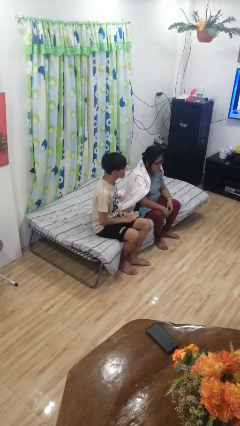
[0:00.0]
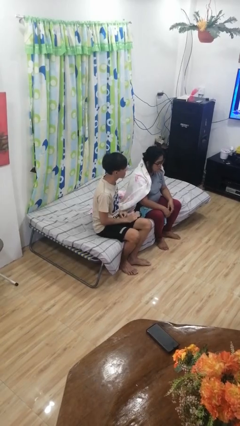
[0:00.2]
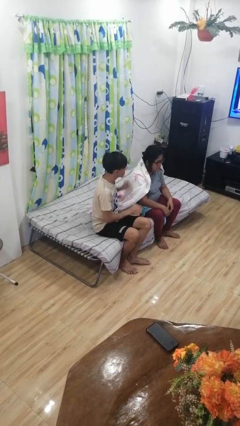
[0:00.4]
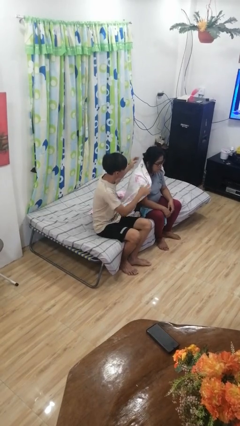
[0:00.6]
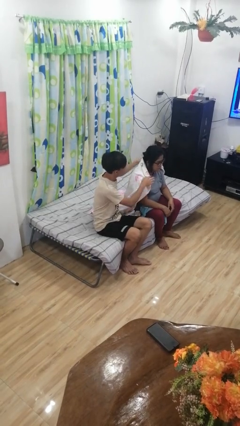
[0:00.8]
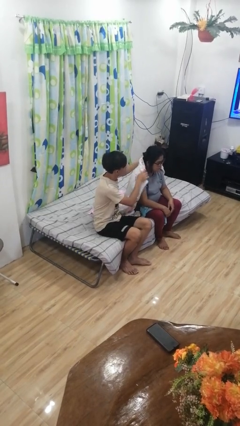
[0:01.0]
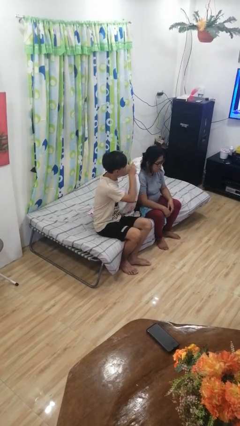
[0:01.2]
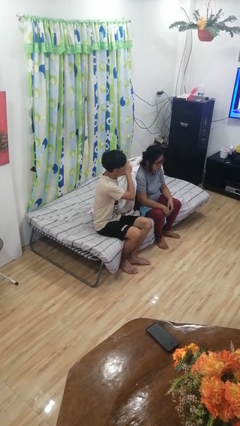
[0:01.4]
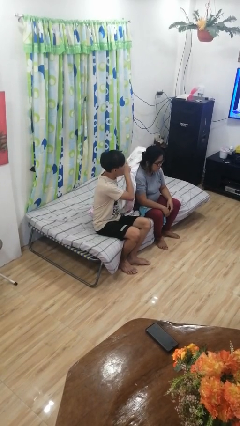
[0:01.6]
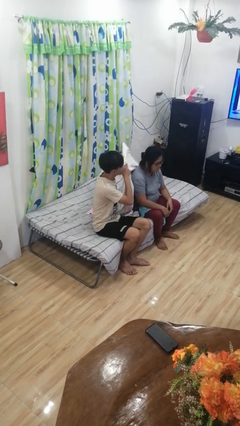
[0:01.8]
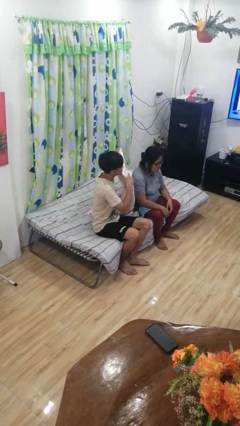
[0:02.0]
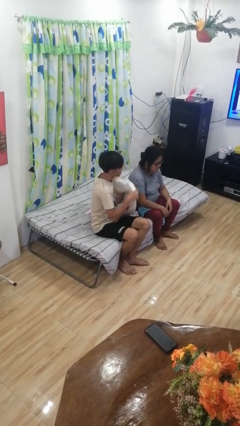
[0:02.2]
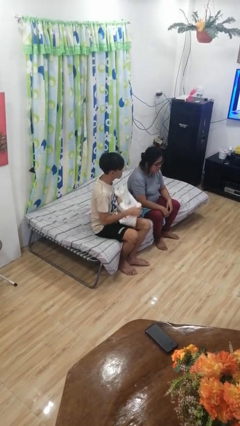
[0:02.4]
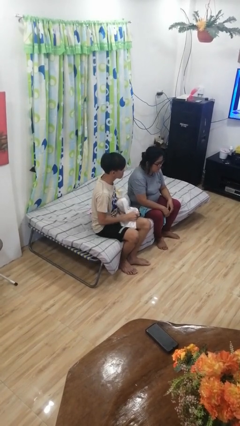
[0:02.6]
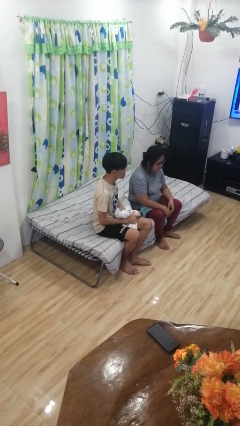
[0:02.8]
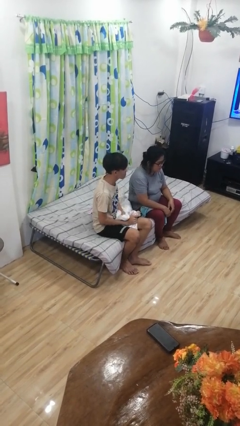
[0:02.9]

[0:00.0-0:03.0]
person uncovers friend with blanket

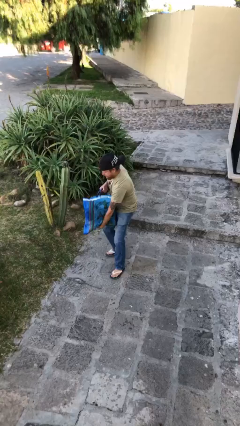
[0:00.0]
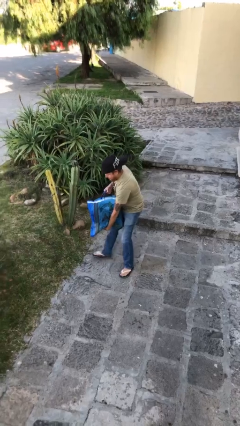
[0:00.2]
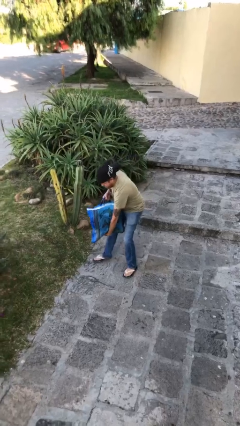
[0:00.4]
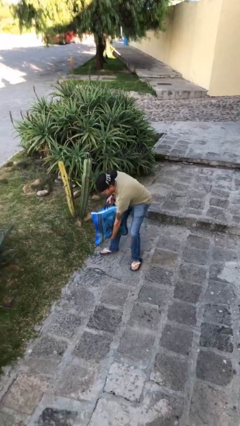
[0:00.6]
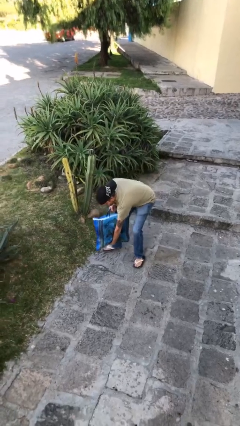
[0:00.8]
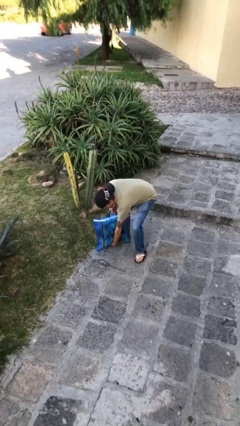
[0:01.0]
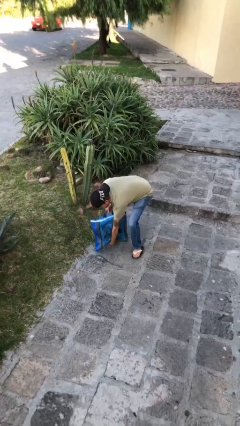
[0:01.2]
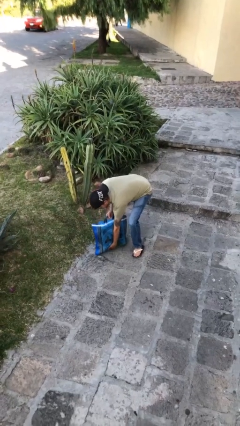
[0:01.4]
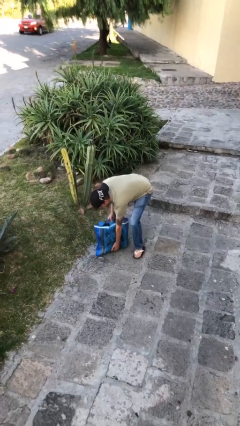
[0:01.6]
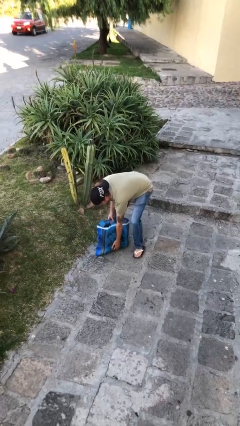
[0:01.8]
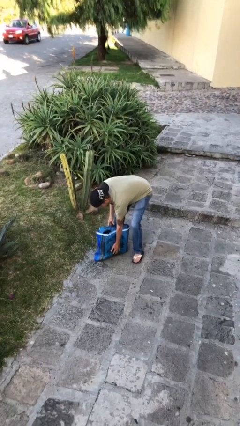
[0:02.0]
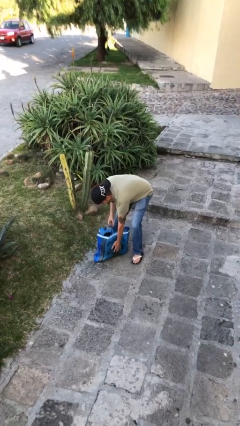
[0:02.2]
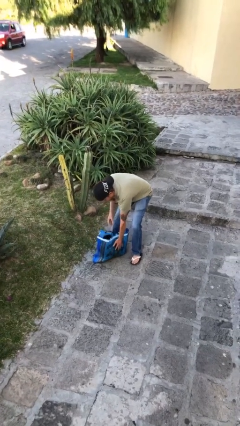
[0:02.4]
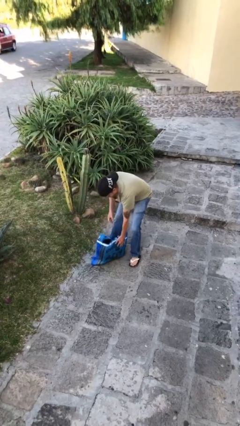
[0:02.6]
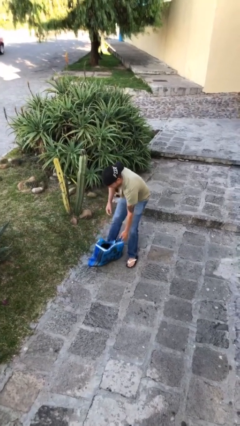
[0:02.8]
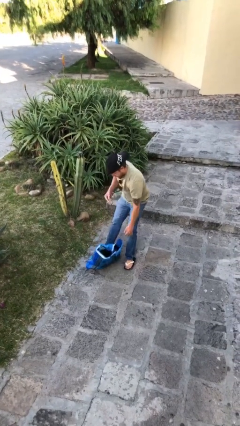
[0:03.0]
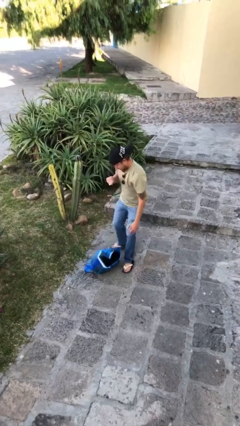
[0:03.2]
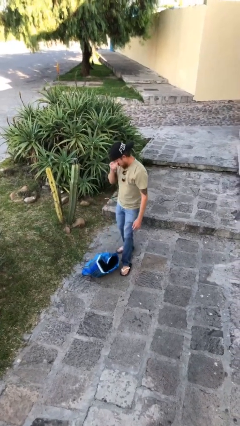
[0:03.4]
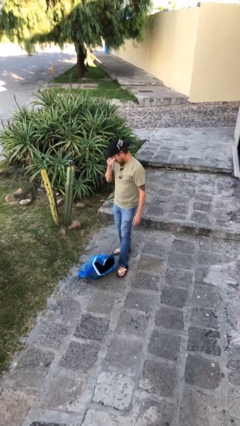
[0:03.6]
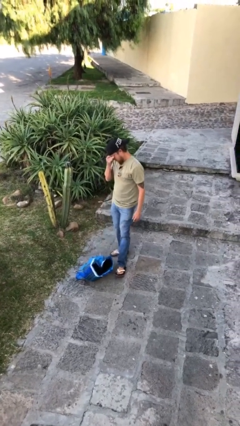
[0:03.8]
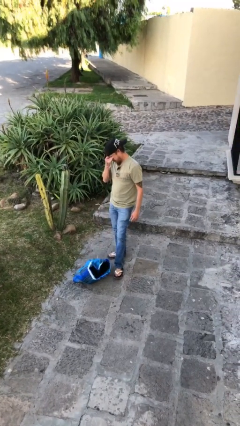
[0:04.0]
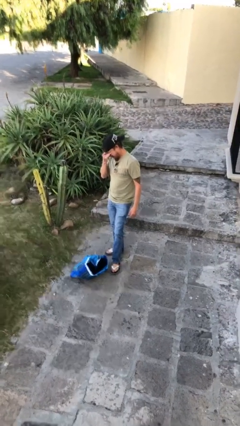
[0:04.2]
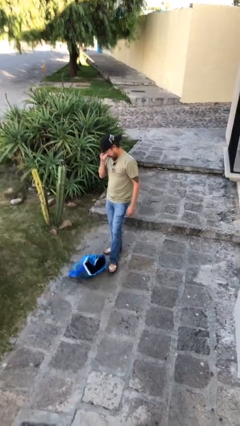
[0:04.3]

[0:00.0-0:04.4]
person puts down object on floor

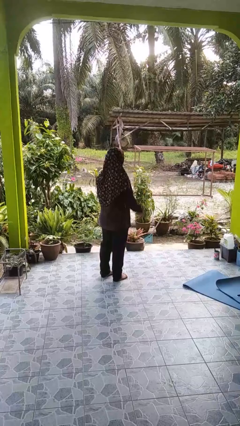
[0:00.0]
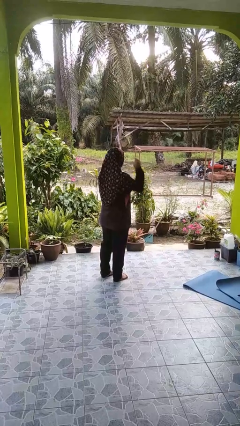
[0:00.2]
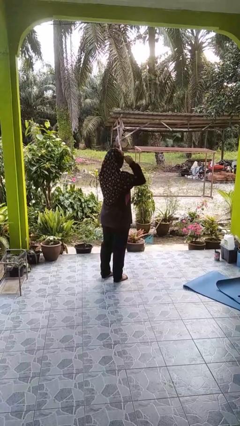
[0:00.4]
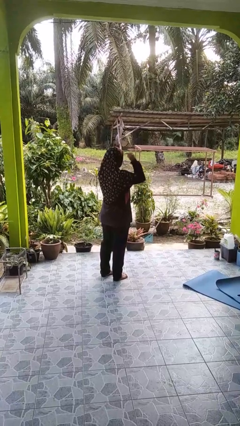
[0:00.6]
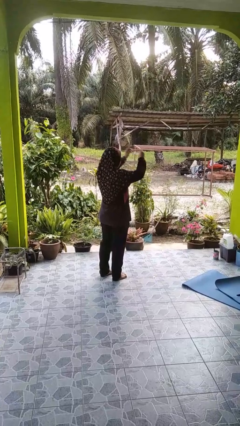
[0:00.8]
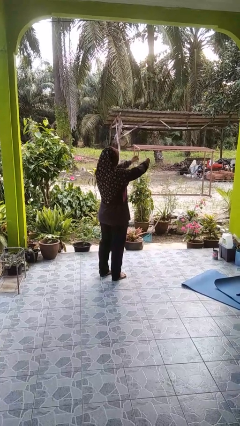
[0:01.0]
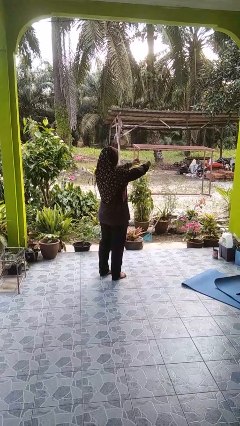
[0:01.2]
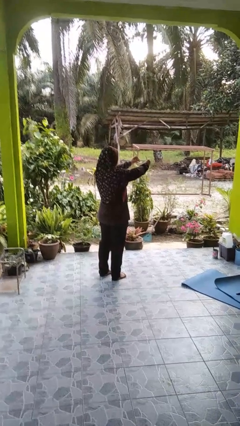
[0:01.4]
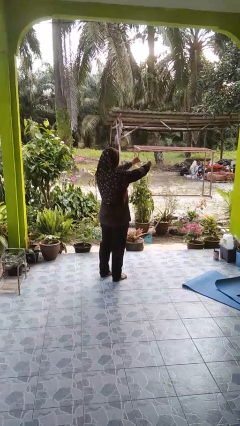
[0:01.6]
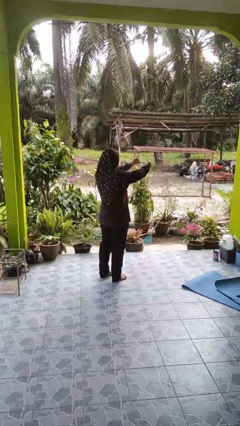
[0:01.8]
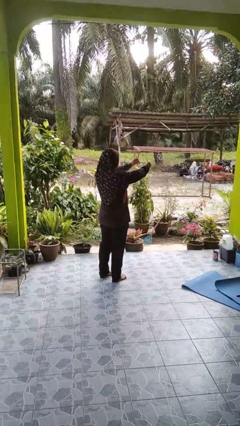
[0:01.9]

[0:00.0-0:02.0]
person takes off glasses

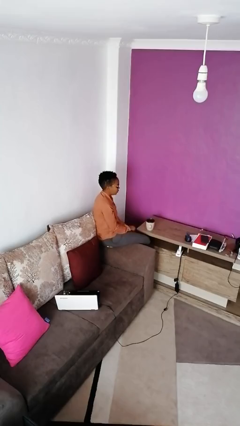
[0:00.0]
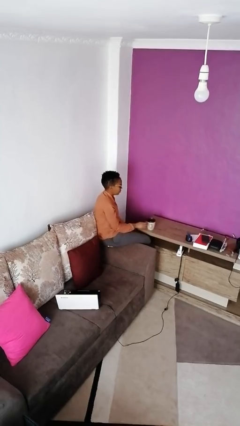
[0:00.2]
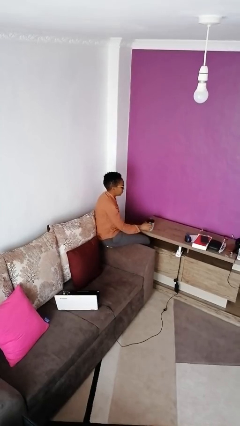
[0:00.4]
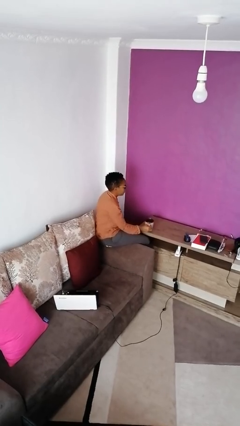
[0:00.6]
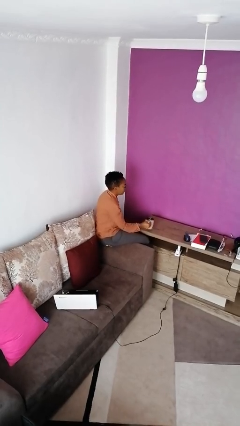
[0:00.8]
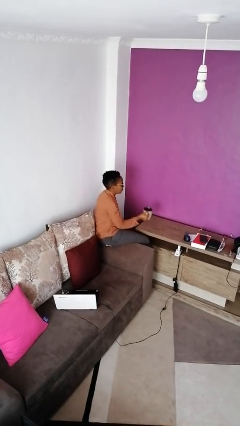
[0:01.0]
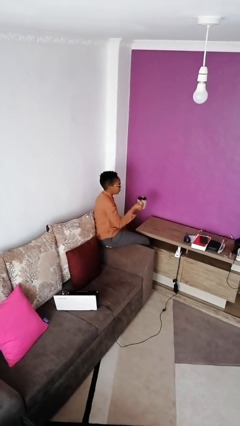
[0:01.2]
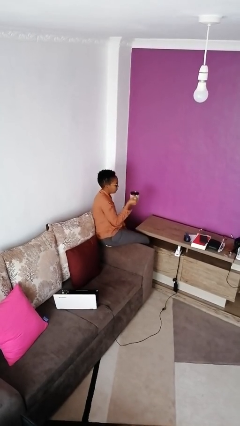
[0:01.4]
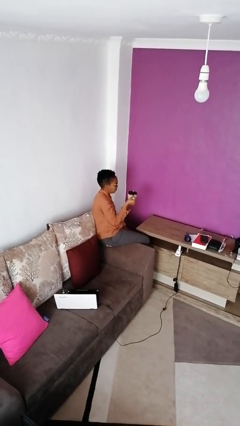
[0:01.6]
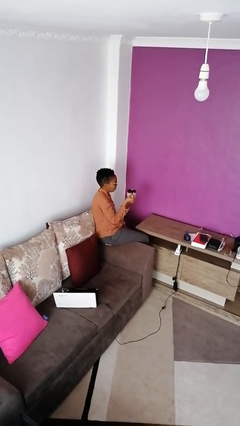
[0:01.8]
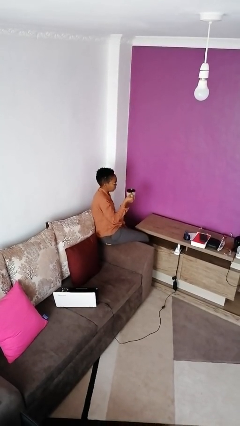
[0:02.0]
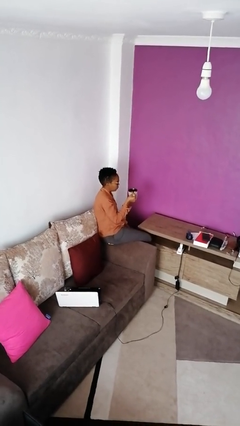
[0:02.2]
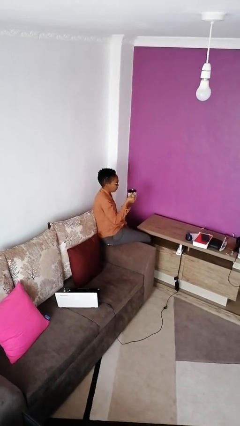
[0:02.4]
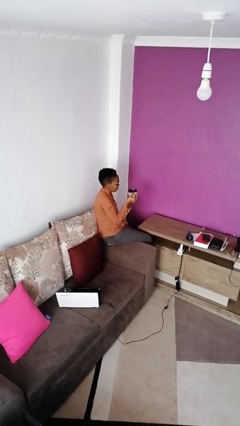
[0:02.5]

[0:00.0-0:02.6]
person picks up object from table

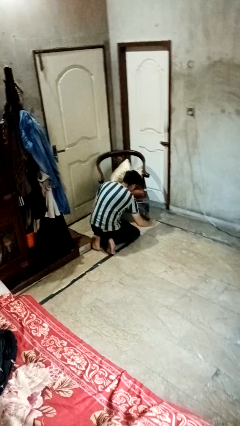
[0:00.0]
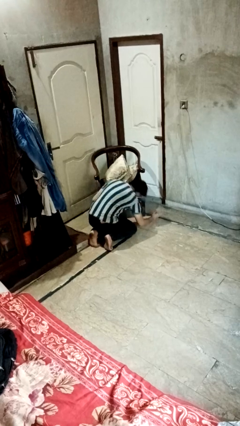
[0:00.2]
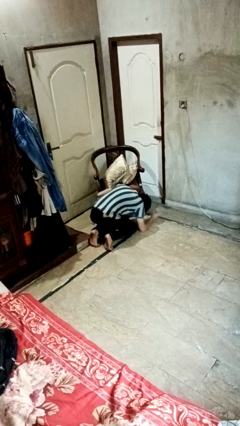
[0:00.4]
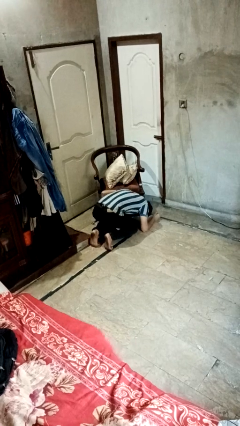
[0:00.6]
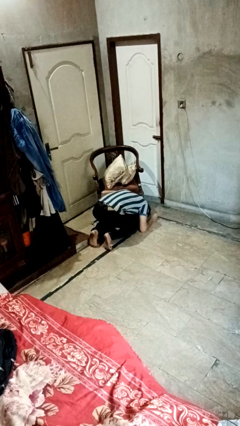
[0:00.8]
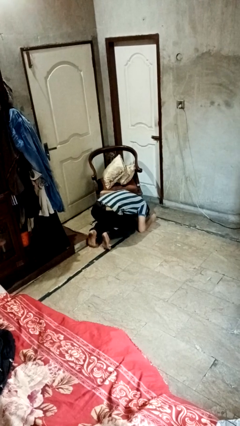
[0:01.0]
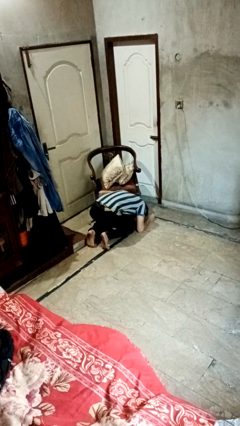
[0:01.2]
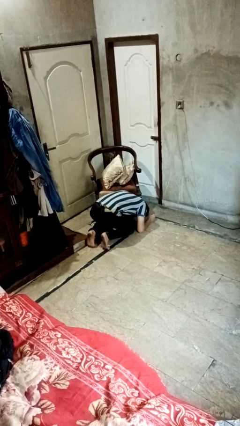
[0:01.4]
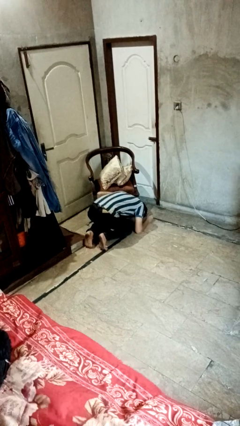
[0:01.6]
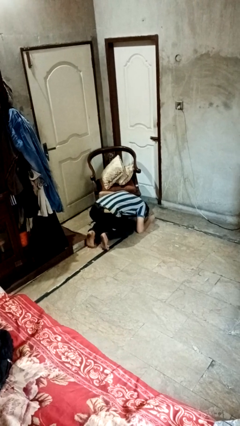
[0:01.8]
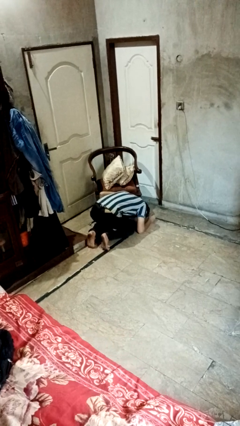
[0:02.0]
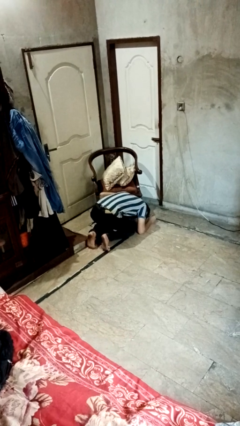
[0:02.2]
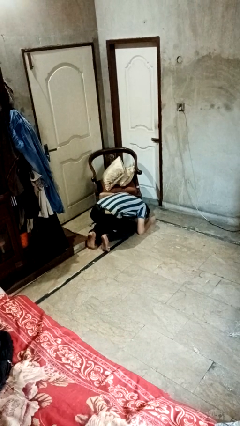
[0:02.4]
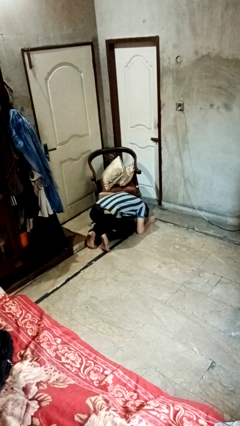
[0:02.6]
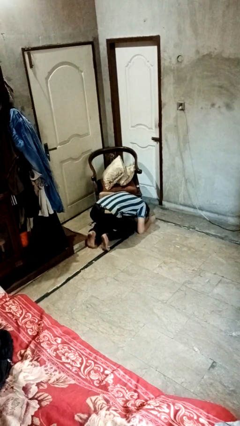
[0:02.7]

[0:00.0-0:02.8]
person searches under couch

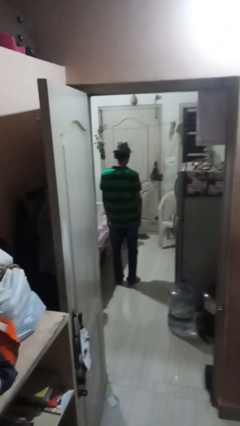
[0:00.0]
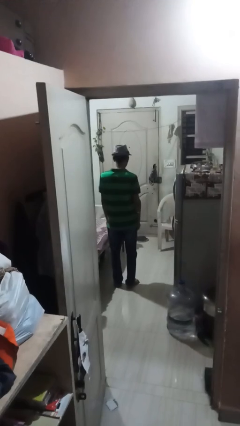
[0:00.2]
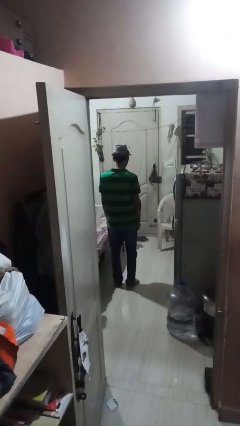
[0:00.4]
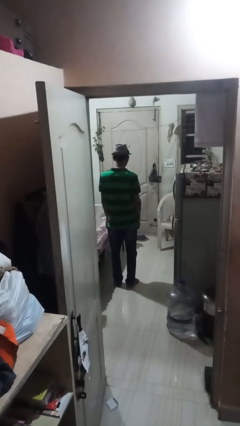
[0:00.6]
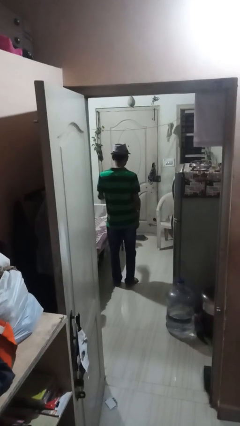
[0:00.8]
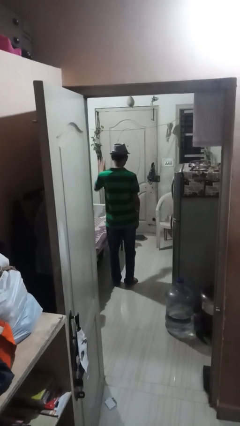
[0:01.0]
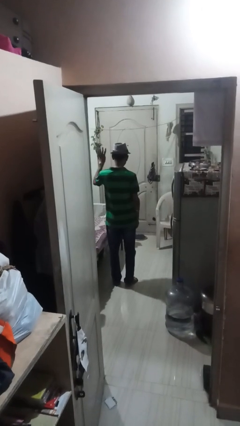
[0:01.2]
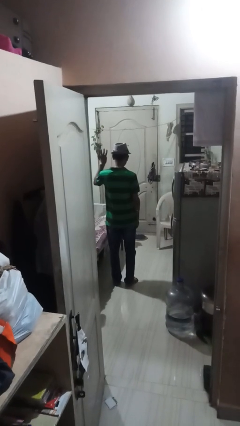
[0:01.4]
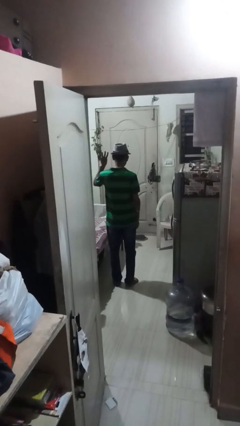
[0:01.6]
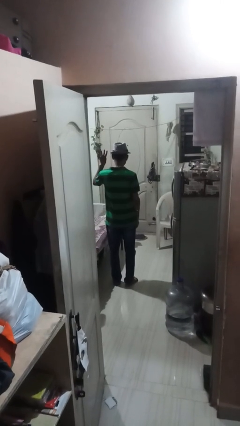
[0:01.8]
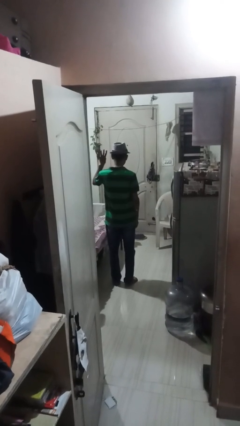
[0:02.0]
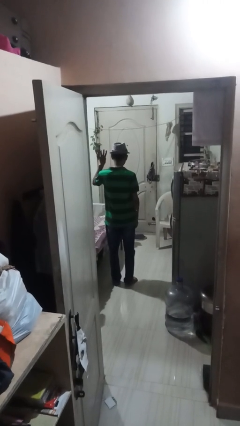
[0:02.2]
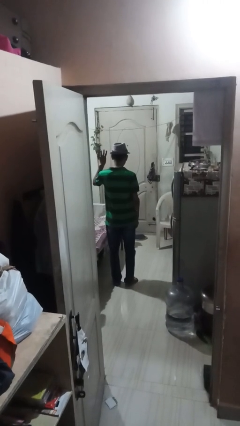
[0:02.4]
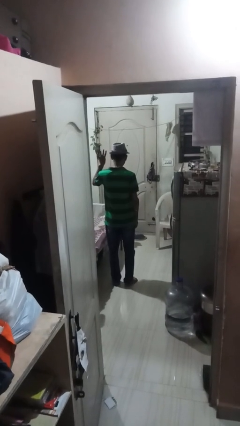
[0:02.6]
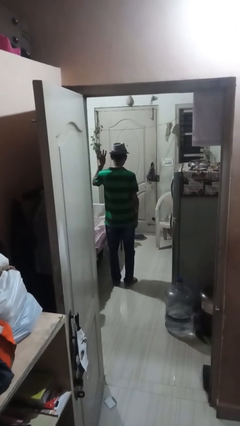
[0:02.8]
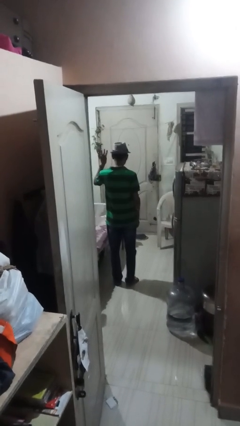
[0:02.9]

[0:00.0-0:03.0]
person gestures number four
